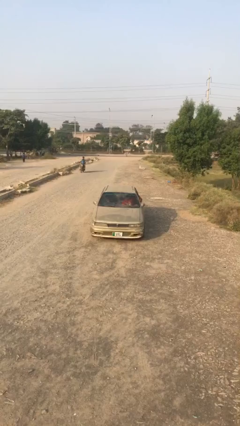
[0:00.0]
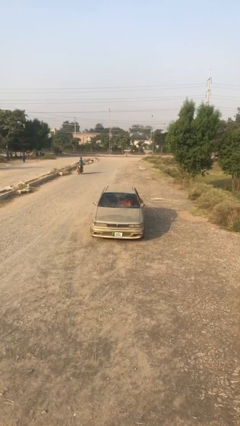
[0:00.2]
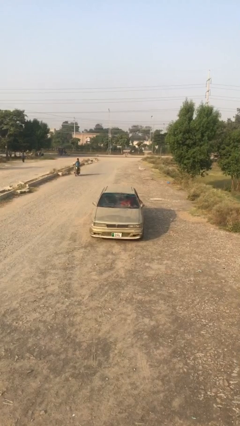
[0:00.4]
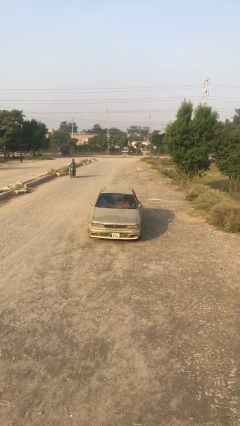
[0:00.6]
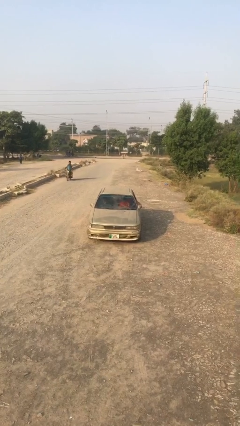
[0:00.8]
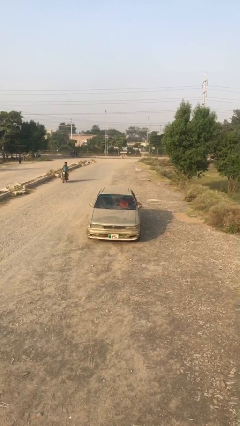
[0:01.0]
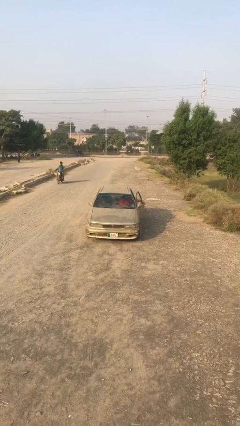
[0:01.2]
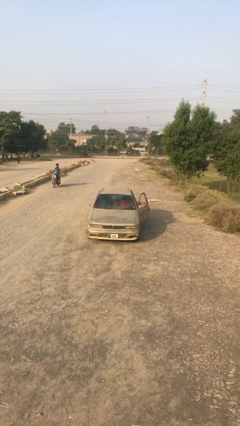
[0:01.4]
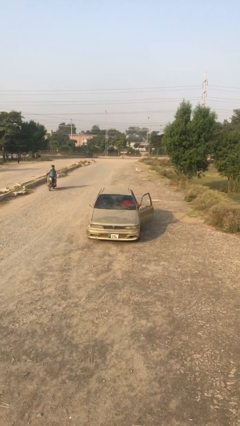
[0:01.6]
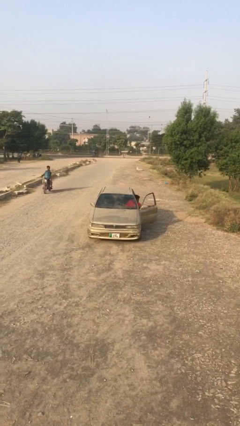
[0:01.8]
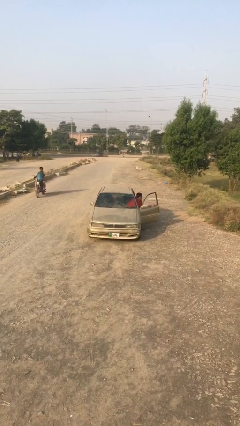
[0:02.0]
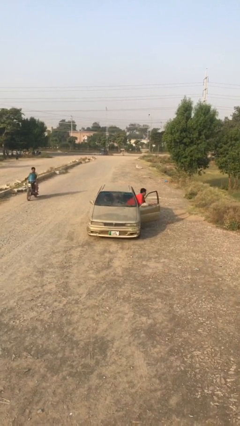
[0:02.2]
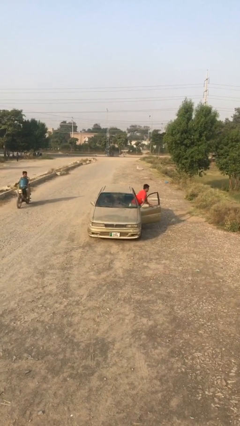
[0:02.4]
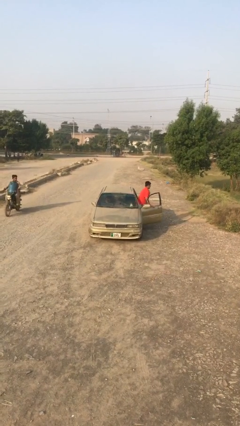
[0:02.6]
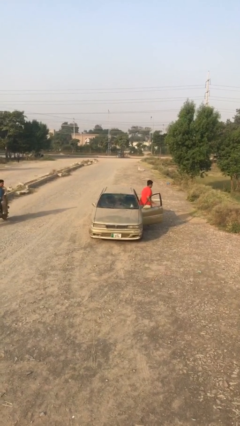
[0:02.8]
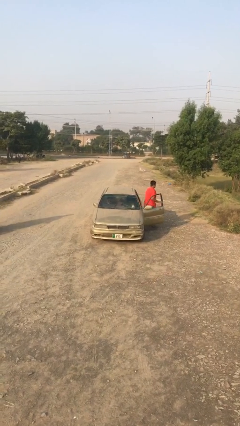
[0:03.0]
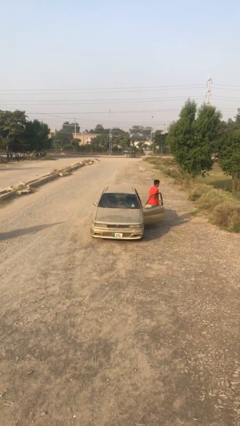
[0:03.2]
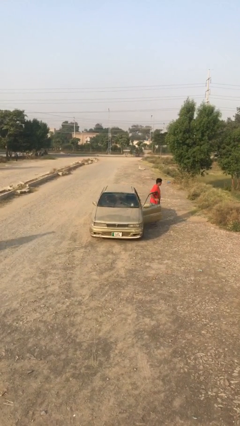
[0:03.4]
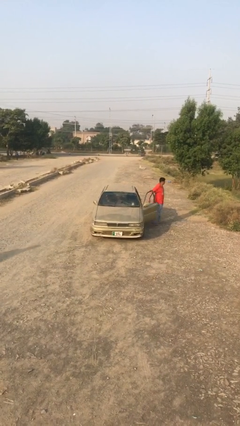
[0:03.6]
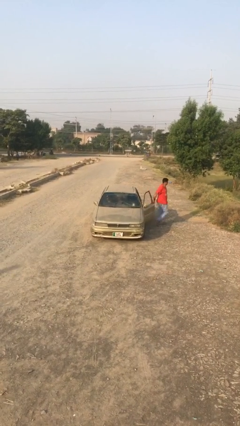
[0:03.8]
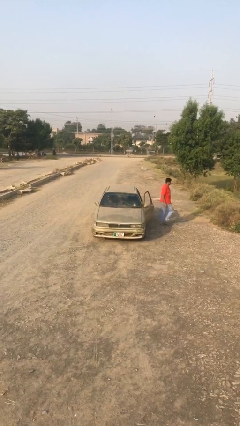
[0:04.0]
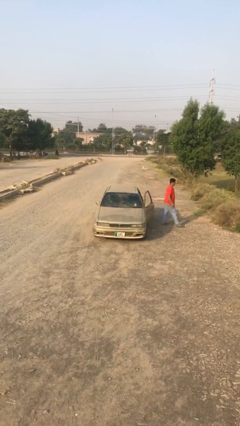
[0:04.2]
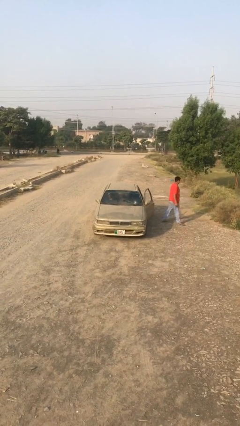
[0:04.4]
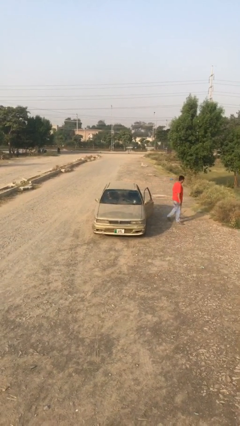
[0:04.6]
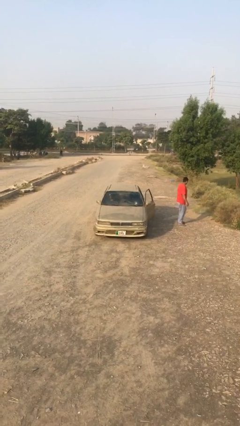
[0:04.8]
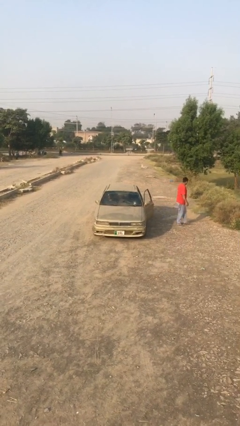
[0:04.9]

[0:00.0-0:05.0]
car drops off person

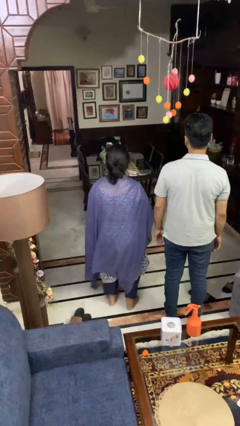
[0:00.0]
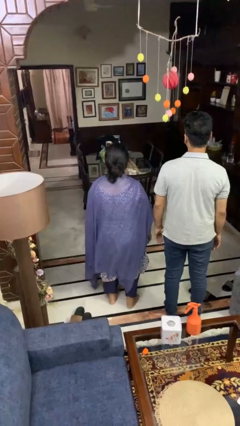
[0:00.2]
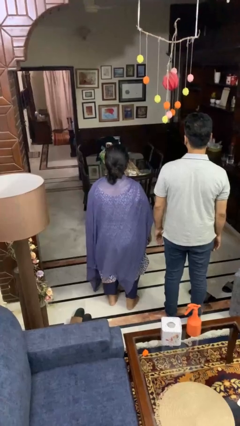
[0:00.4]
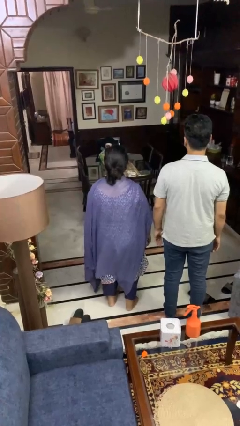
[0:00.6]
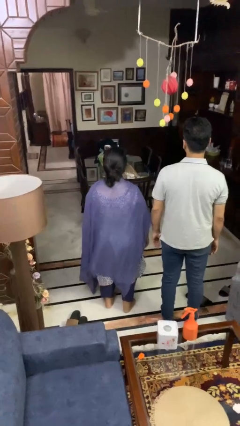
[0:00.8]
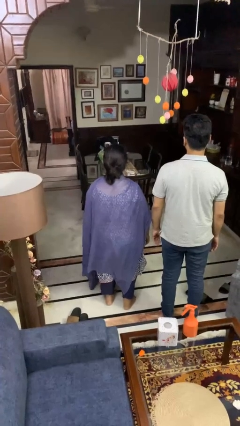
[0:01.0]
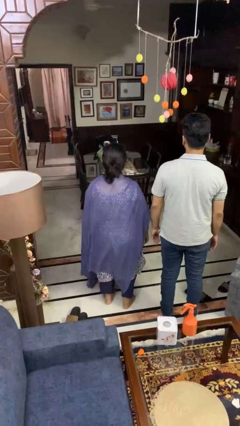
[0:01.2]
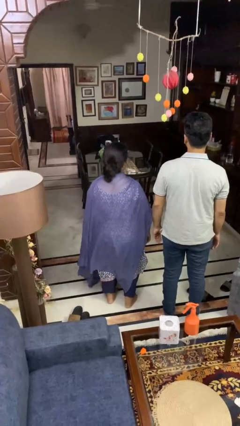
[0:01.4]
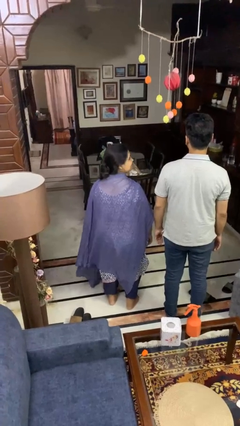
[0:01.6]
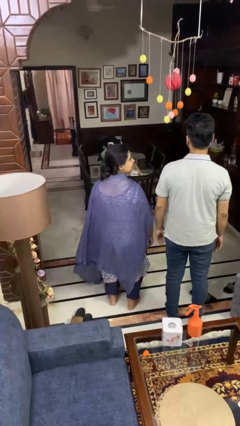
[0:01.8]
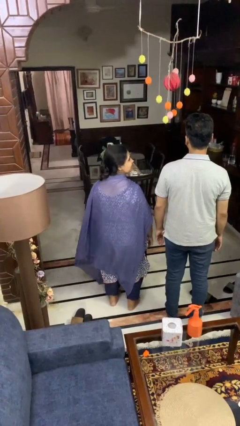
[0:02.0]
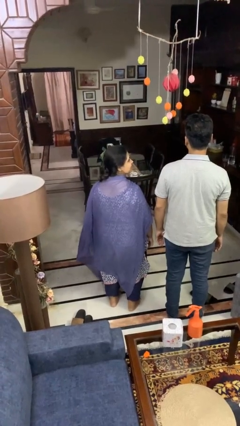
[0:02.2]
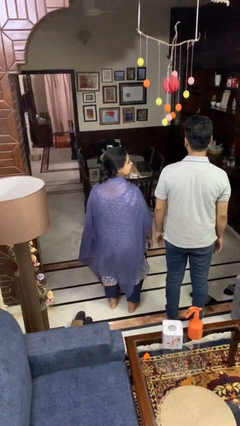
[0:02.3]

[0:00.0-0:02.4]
person looks over shoulder

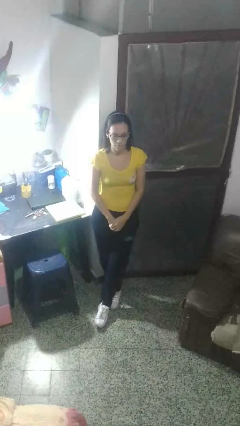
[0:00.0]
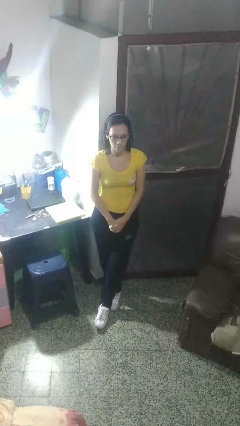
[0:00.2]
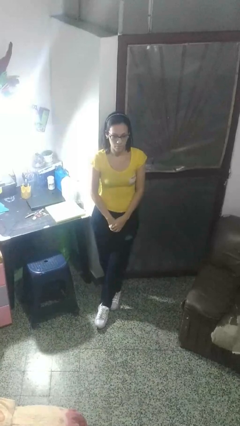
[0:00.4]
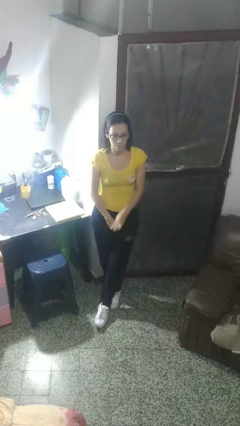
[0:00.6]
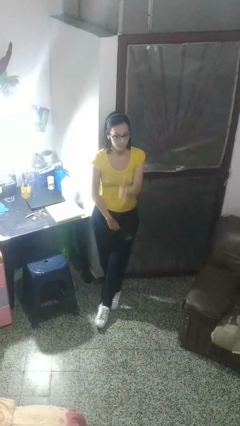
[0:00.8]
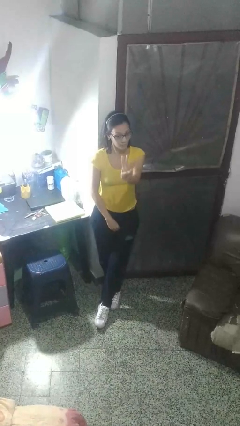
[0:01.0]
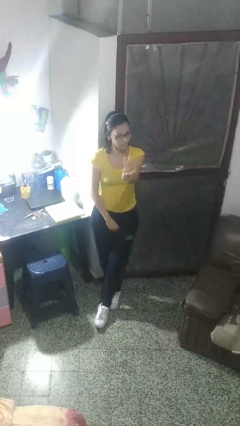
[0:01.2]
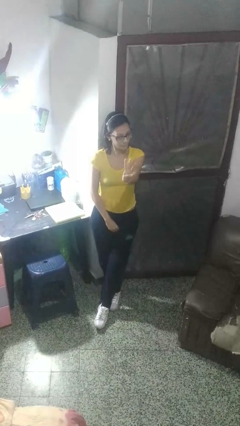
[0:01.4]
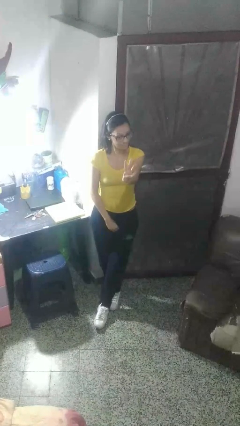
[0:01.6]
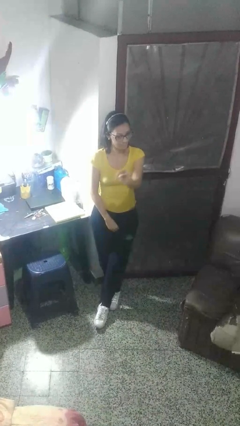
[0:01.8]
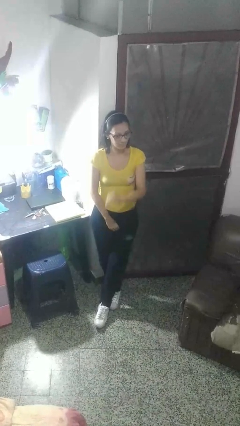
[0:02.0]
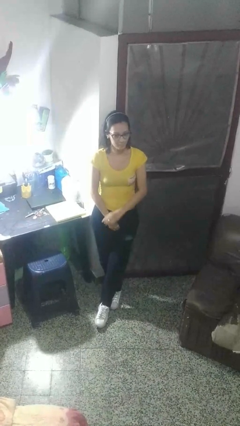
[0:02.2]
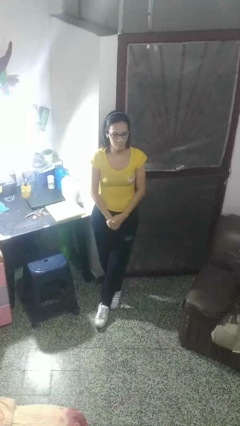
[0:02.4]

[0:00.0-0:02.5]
person gestures number three

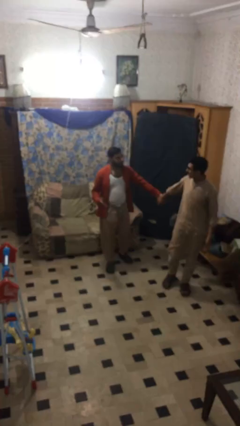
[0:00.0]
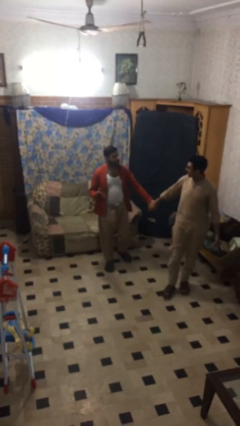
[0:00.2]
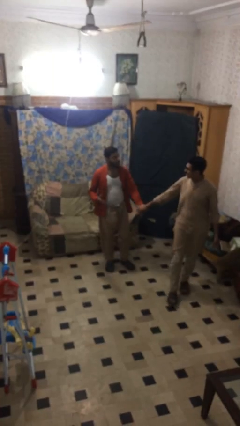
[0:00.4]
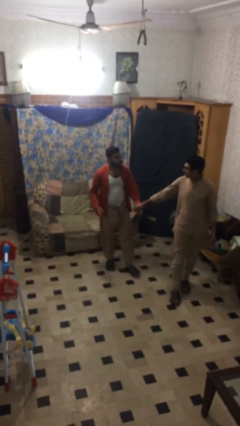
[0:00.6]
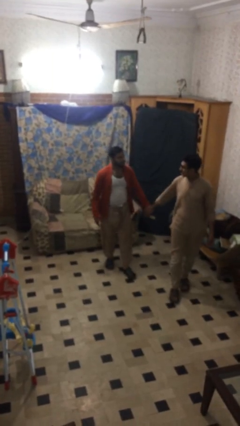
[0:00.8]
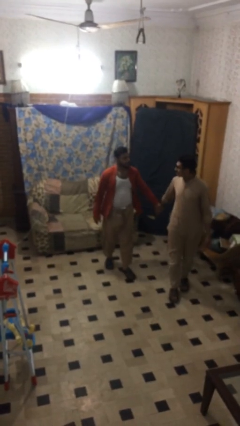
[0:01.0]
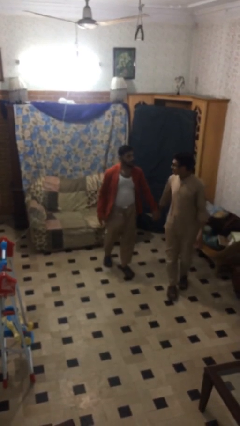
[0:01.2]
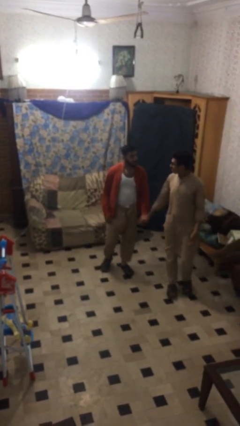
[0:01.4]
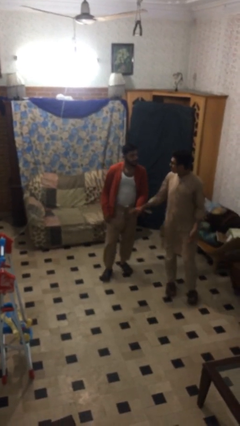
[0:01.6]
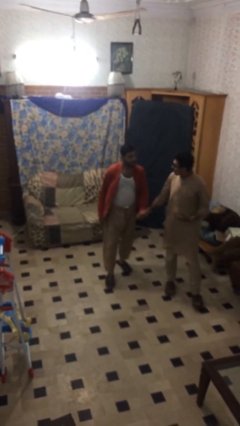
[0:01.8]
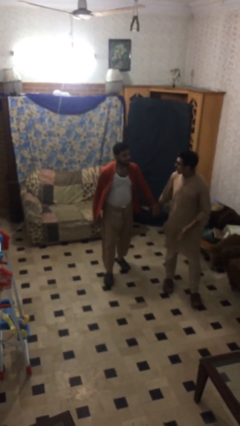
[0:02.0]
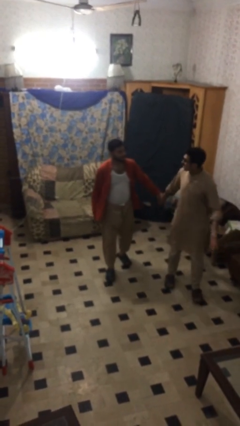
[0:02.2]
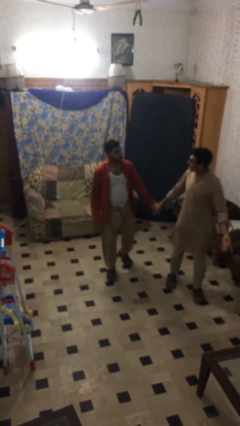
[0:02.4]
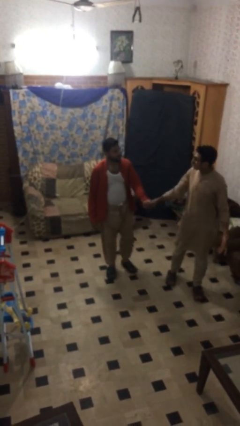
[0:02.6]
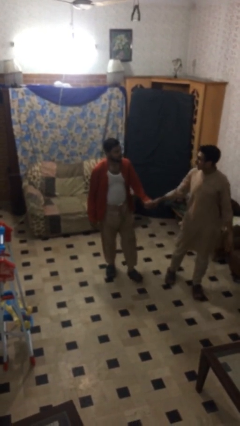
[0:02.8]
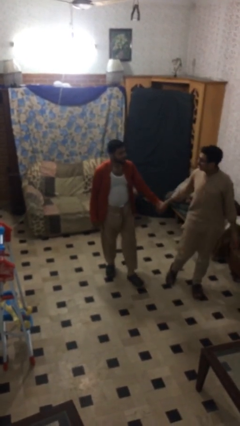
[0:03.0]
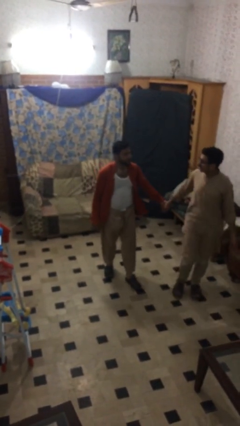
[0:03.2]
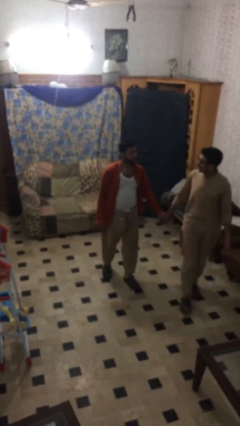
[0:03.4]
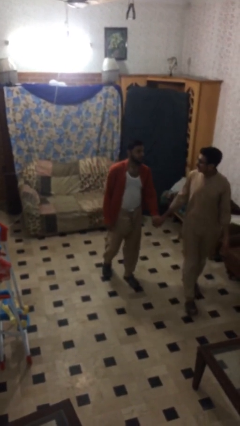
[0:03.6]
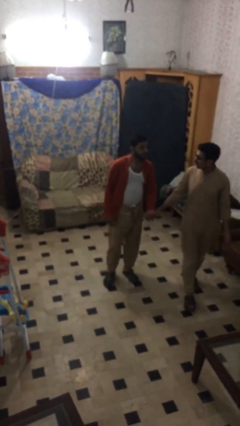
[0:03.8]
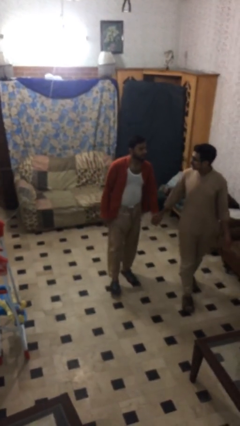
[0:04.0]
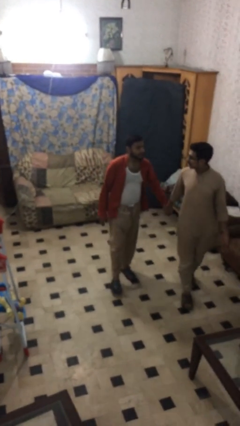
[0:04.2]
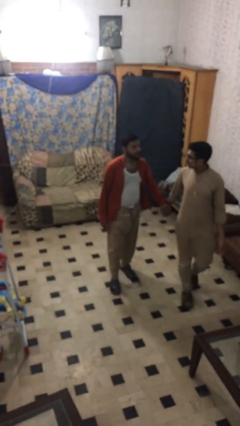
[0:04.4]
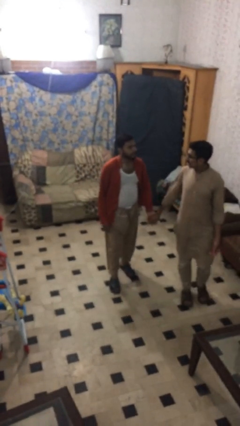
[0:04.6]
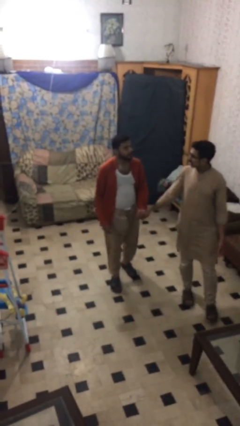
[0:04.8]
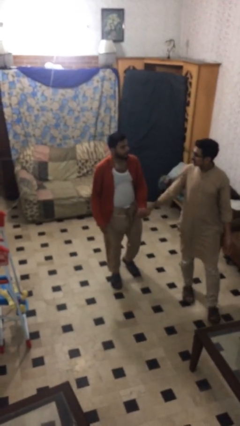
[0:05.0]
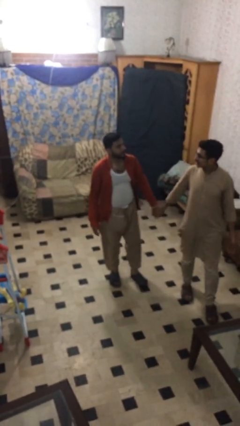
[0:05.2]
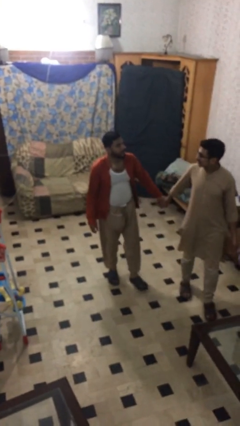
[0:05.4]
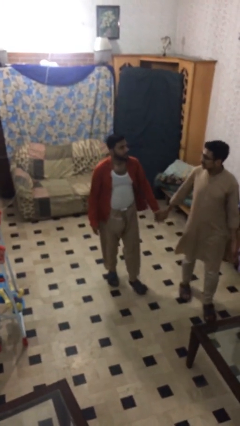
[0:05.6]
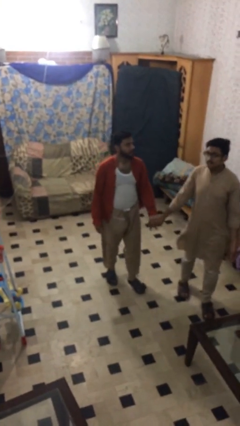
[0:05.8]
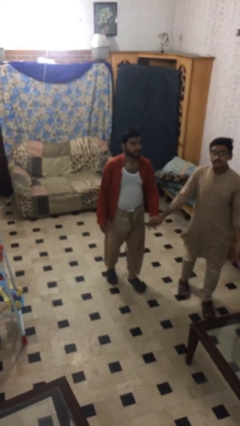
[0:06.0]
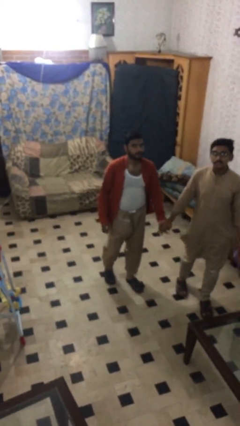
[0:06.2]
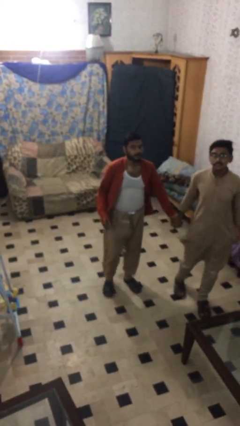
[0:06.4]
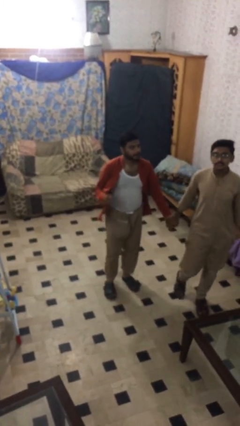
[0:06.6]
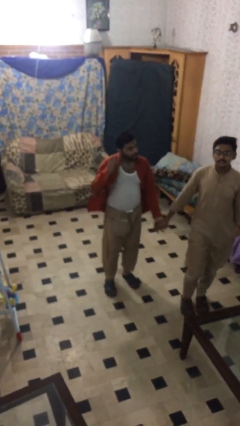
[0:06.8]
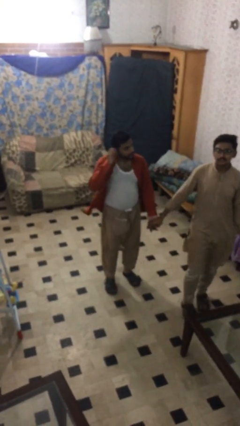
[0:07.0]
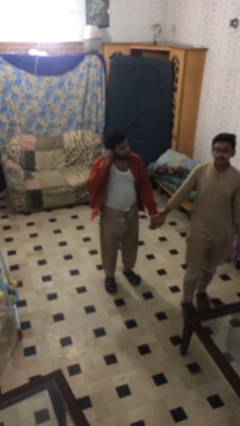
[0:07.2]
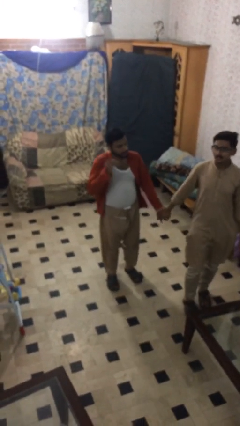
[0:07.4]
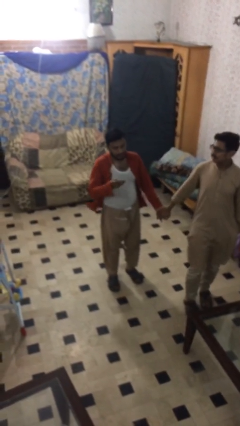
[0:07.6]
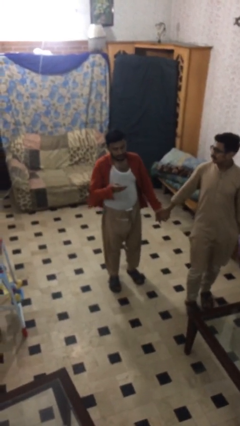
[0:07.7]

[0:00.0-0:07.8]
person holds hand

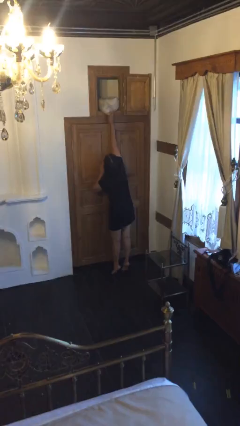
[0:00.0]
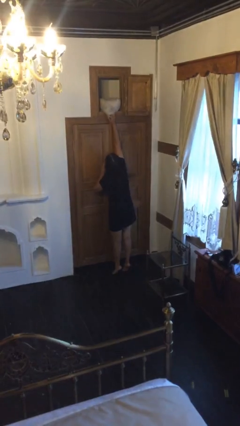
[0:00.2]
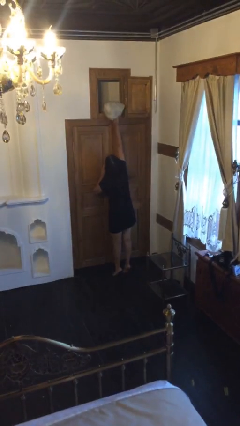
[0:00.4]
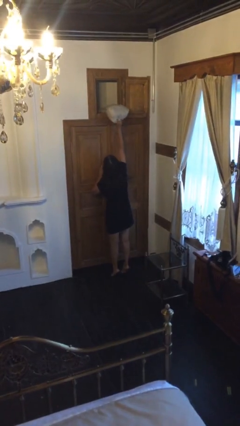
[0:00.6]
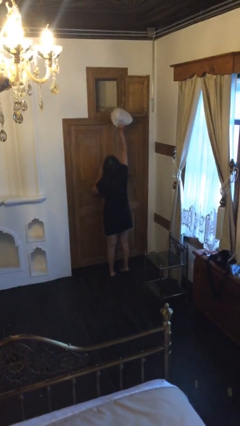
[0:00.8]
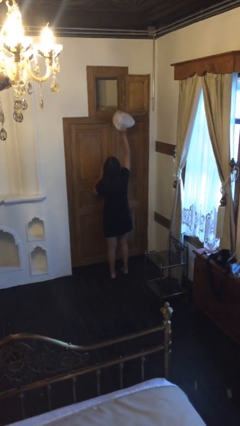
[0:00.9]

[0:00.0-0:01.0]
person picks up object from shelf
